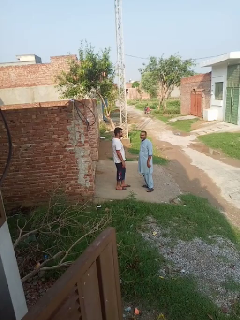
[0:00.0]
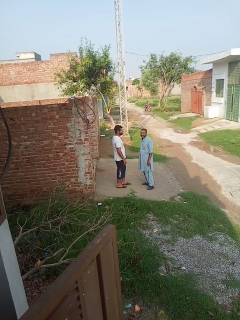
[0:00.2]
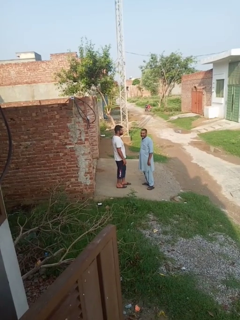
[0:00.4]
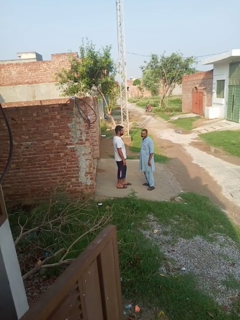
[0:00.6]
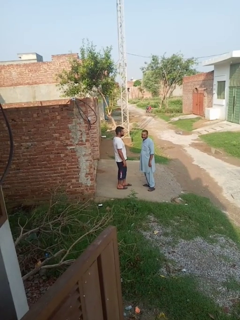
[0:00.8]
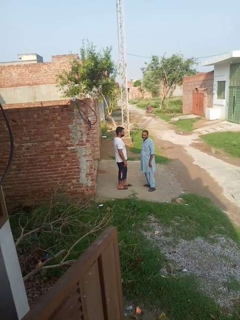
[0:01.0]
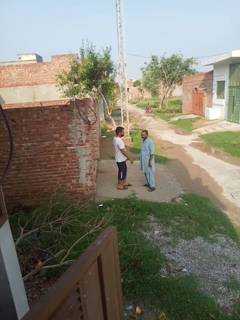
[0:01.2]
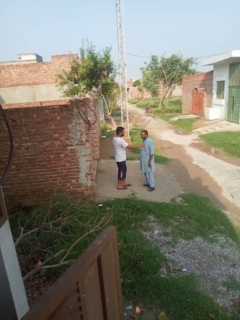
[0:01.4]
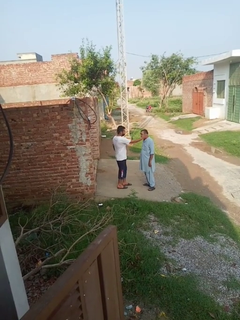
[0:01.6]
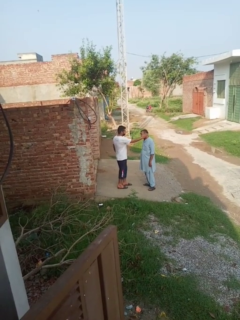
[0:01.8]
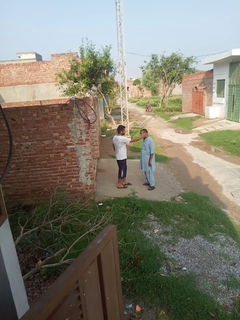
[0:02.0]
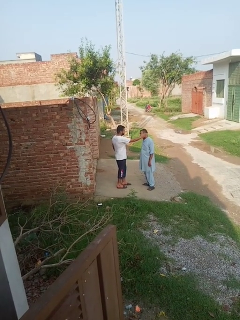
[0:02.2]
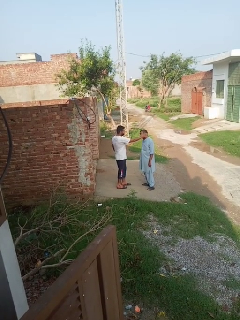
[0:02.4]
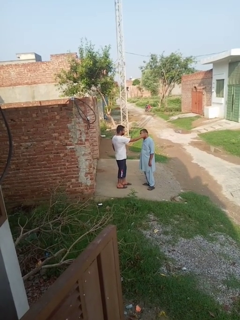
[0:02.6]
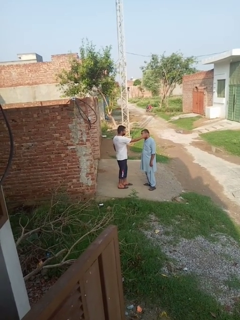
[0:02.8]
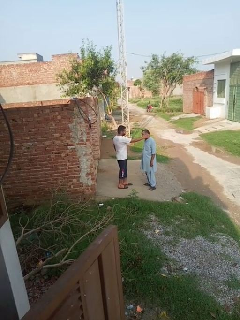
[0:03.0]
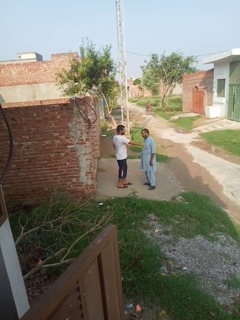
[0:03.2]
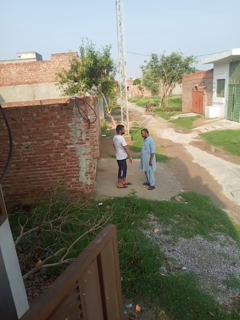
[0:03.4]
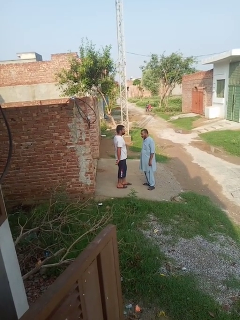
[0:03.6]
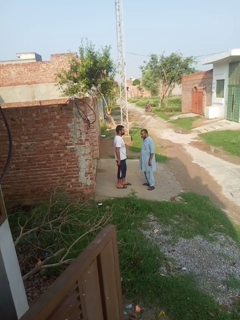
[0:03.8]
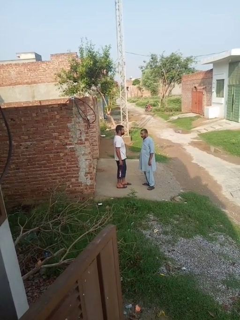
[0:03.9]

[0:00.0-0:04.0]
person touches face of person

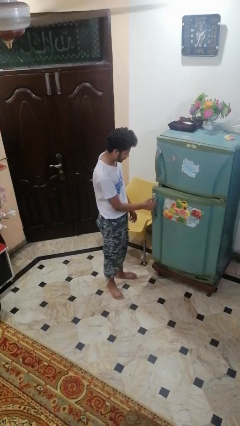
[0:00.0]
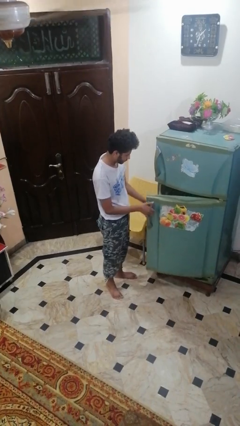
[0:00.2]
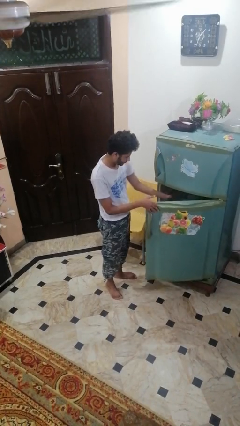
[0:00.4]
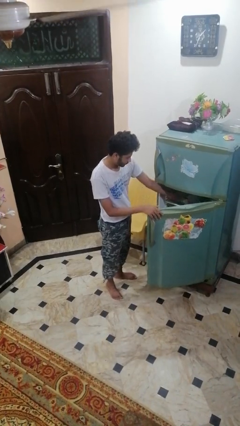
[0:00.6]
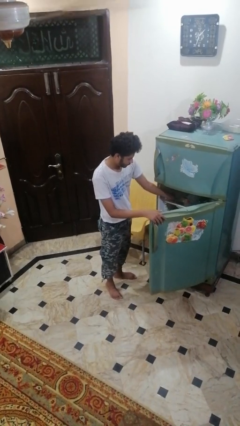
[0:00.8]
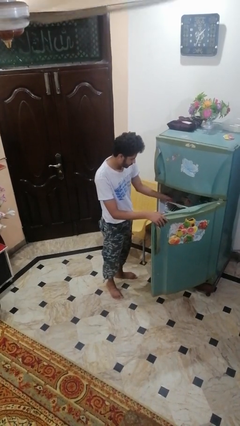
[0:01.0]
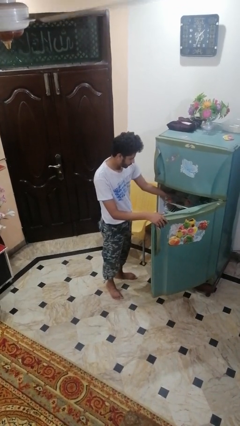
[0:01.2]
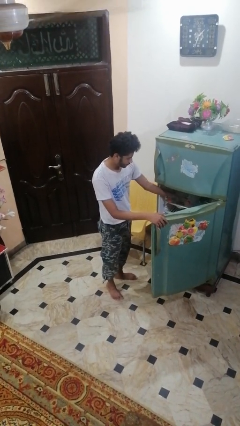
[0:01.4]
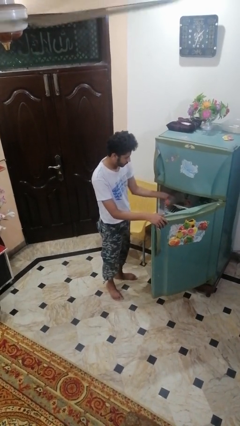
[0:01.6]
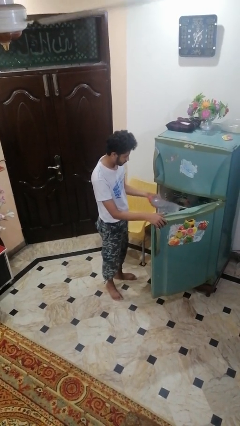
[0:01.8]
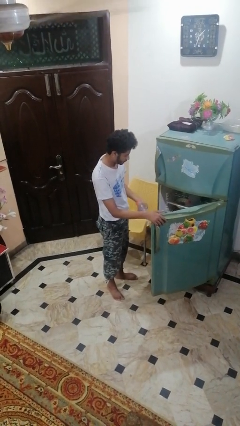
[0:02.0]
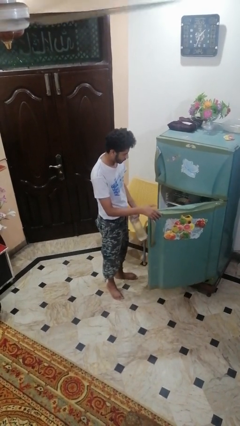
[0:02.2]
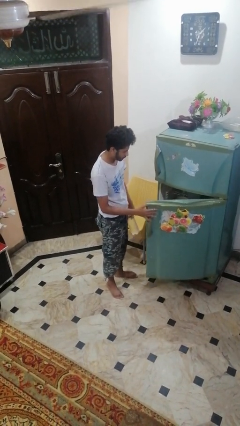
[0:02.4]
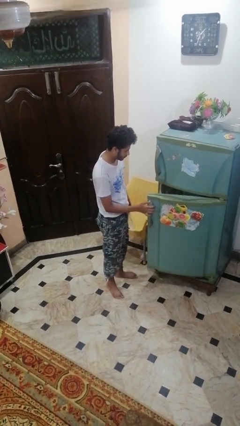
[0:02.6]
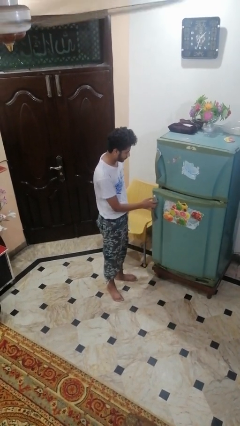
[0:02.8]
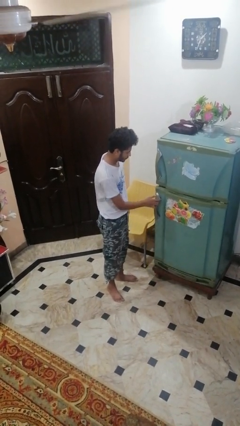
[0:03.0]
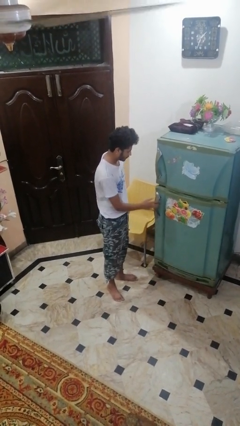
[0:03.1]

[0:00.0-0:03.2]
person takes object from refrigerator

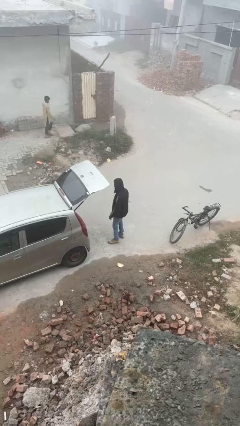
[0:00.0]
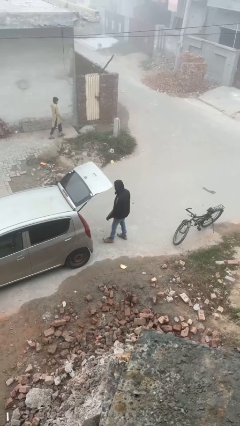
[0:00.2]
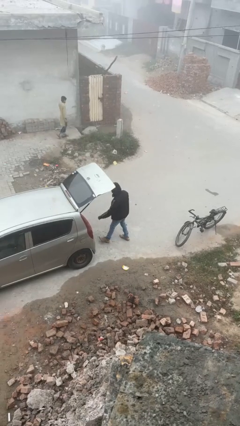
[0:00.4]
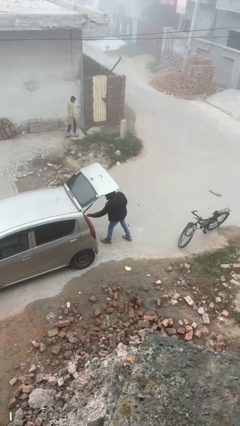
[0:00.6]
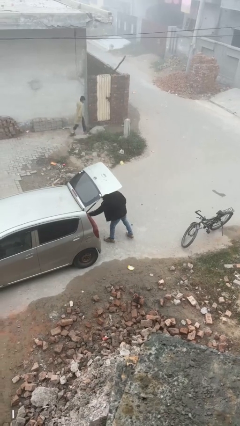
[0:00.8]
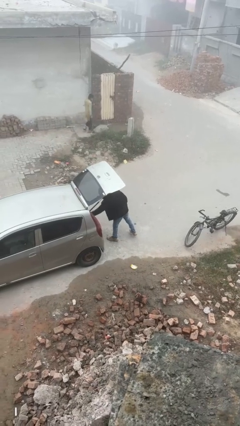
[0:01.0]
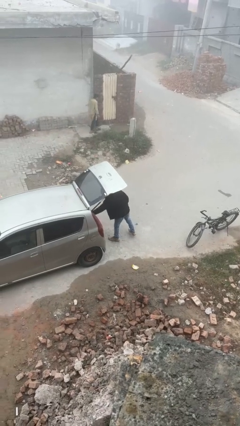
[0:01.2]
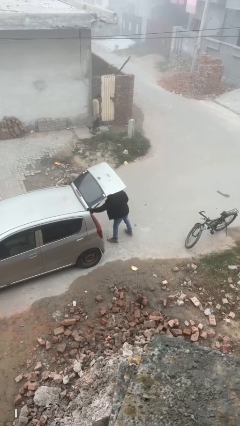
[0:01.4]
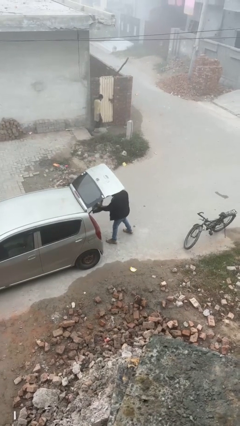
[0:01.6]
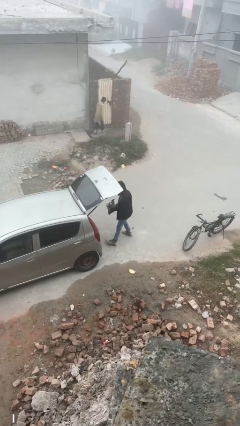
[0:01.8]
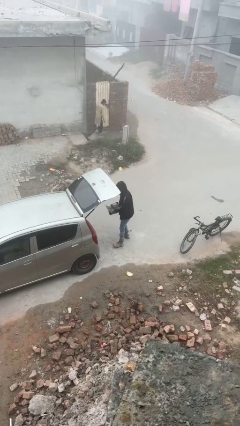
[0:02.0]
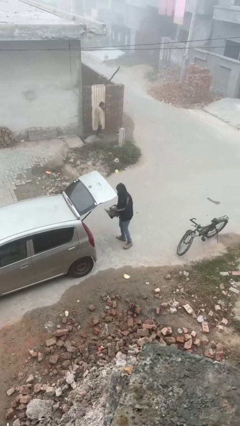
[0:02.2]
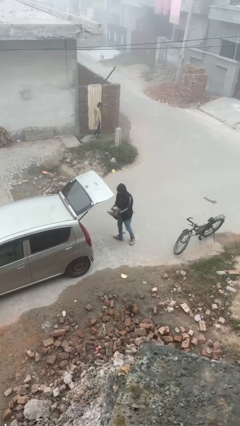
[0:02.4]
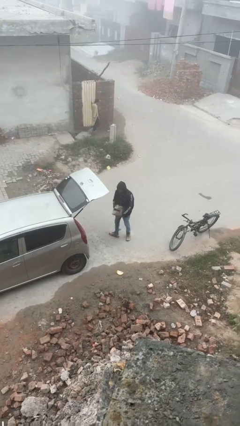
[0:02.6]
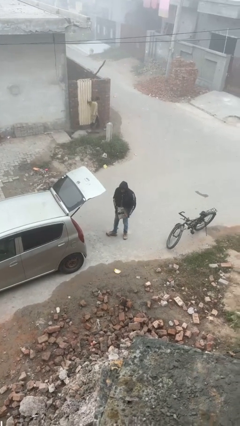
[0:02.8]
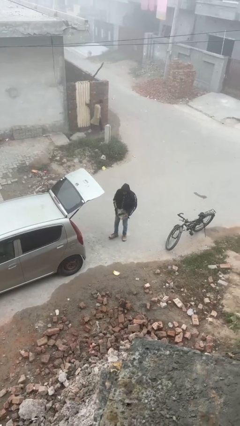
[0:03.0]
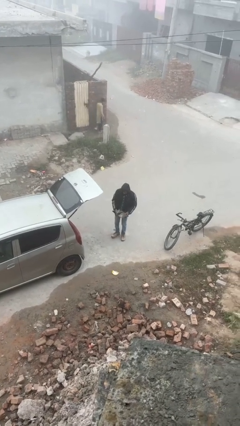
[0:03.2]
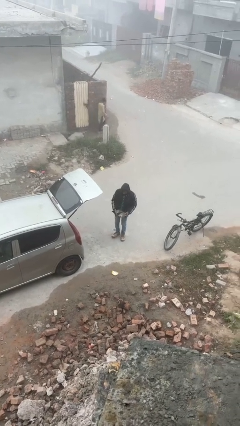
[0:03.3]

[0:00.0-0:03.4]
person unloads car

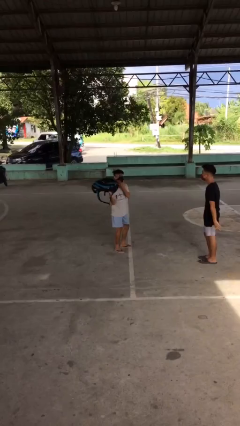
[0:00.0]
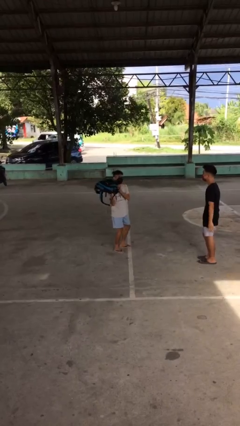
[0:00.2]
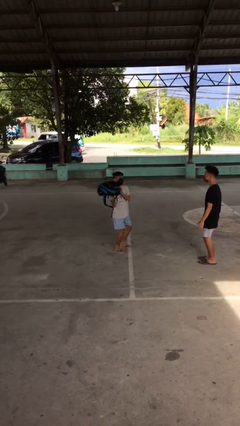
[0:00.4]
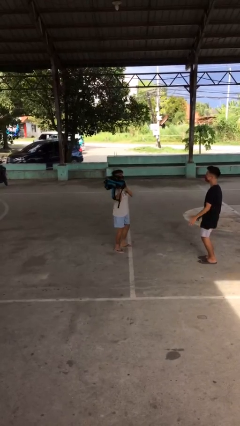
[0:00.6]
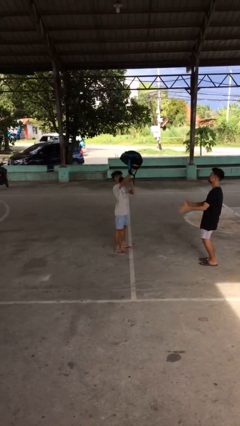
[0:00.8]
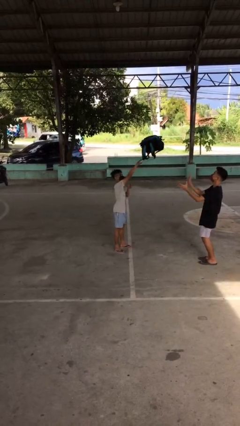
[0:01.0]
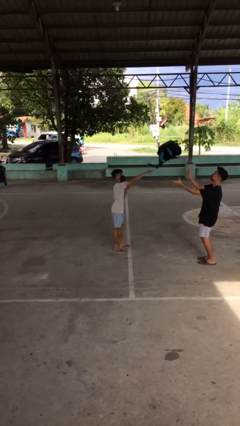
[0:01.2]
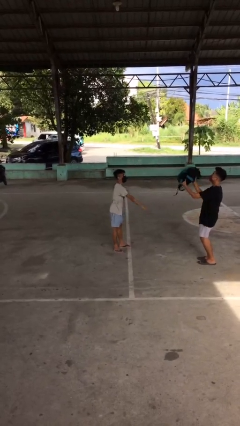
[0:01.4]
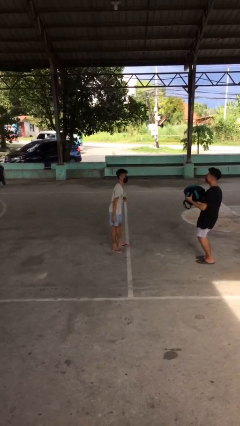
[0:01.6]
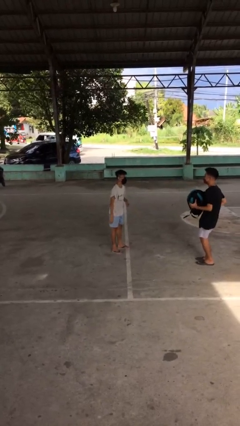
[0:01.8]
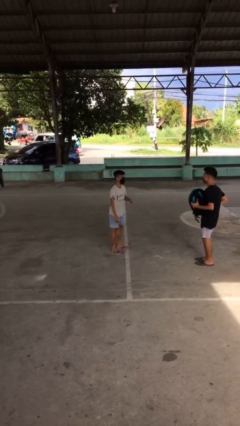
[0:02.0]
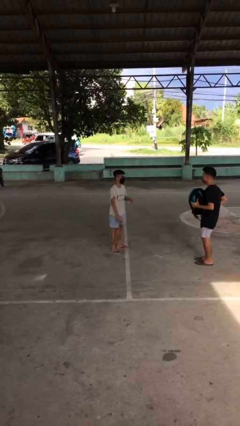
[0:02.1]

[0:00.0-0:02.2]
person throws object to person

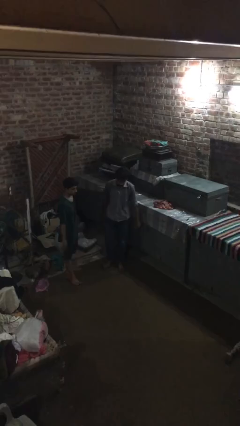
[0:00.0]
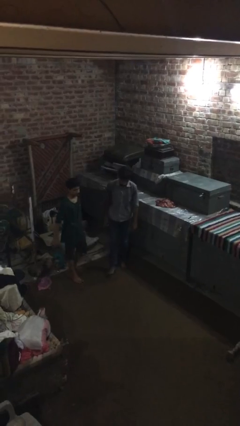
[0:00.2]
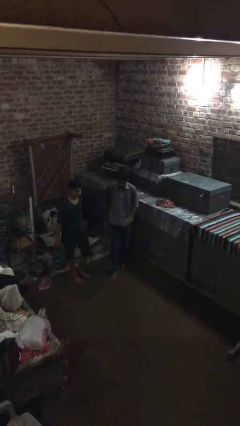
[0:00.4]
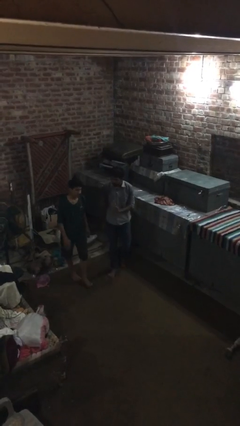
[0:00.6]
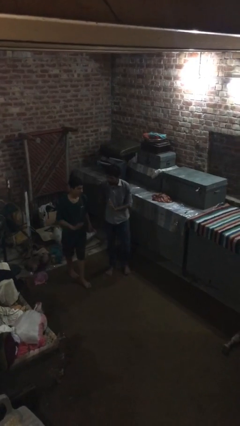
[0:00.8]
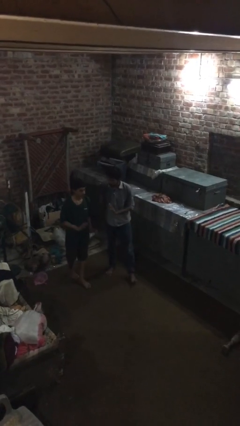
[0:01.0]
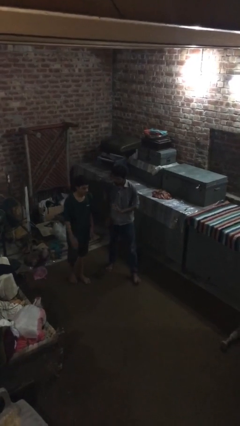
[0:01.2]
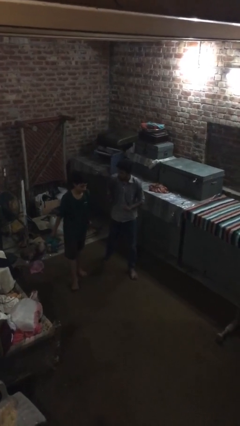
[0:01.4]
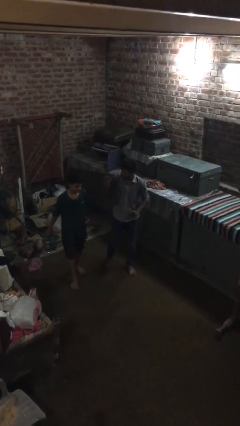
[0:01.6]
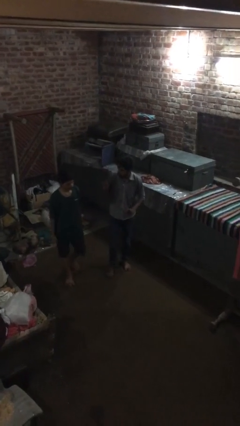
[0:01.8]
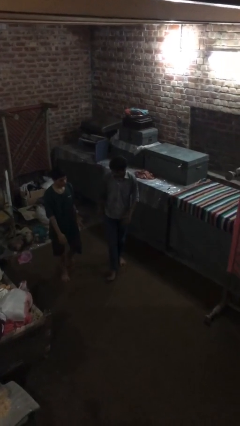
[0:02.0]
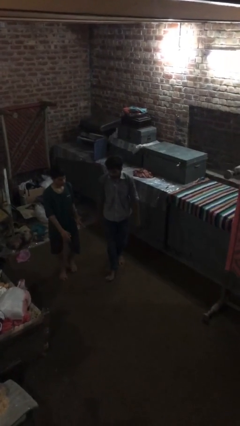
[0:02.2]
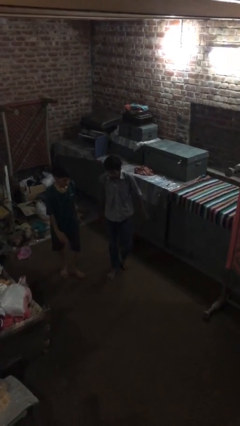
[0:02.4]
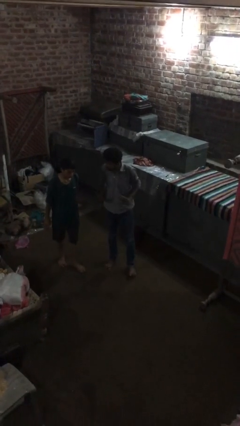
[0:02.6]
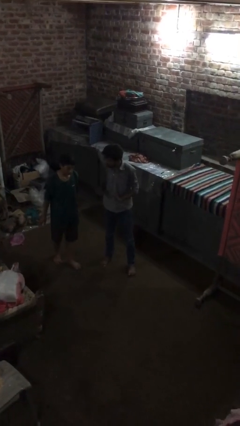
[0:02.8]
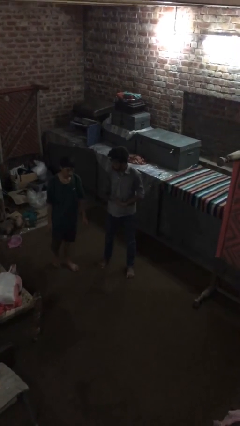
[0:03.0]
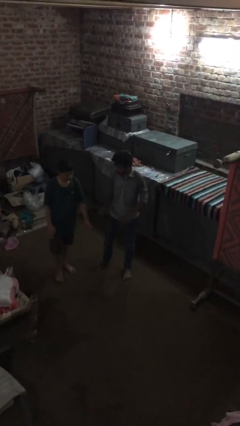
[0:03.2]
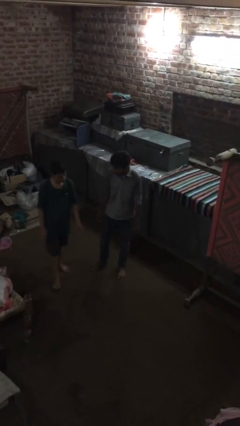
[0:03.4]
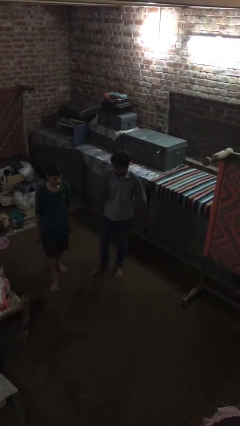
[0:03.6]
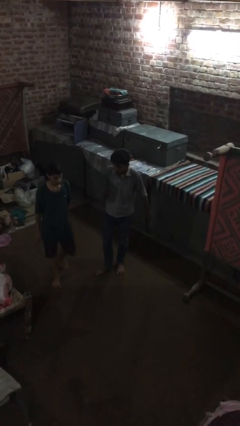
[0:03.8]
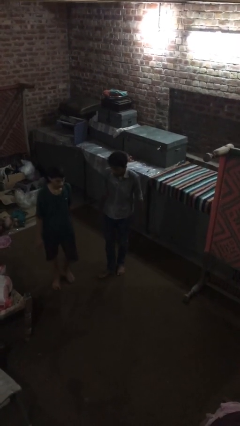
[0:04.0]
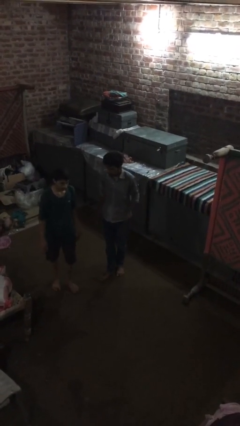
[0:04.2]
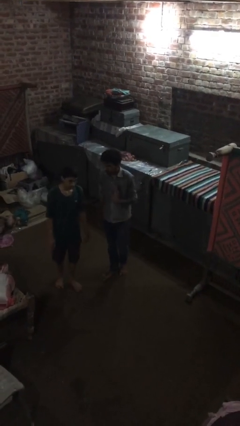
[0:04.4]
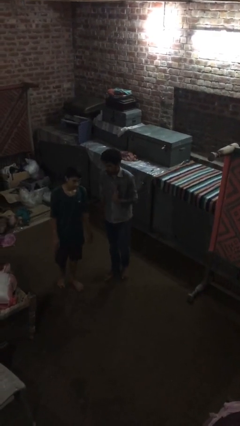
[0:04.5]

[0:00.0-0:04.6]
person talks to person

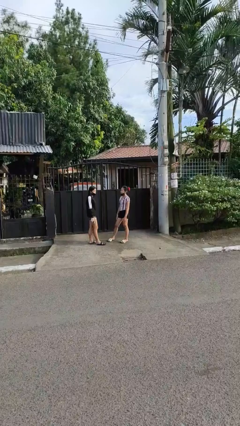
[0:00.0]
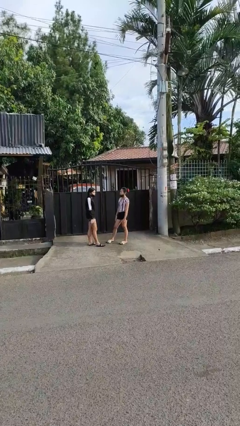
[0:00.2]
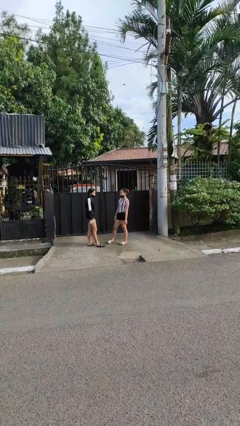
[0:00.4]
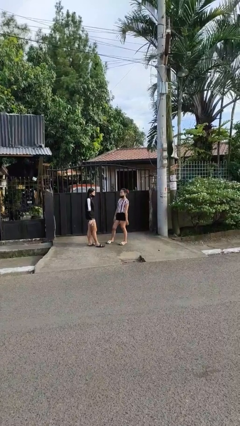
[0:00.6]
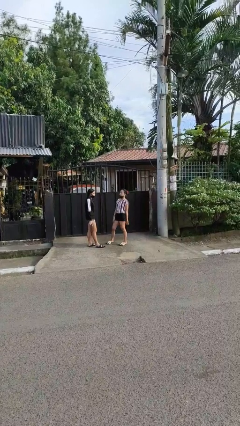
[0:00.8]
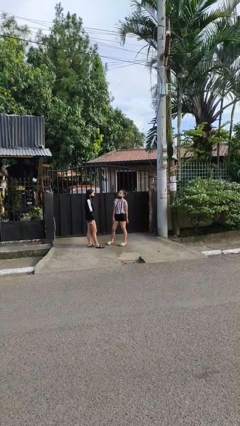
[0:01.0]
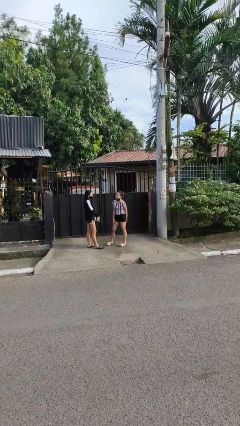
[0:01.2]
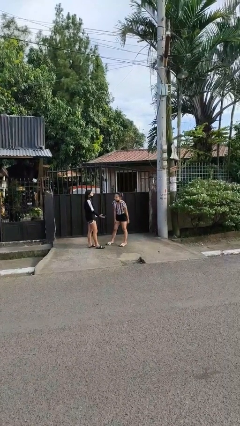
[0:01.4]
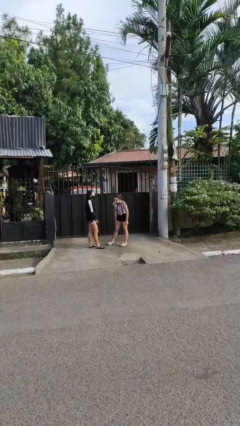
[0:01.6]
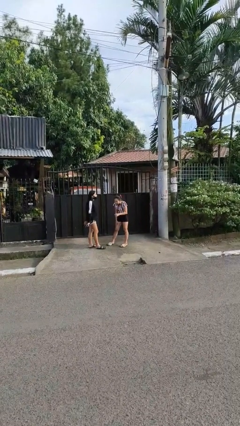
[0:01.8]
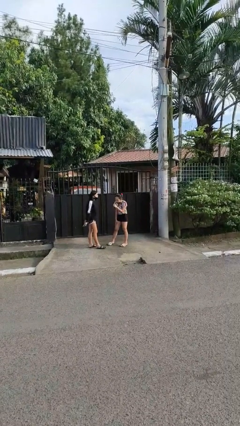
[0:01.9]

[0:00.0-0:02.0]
person laughs with person
